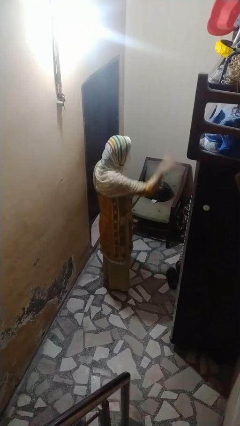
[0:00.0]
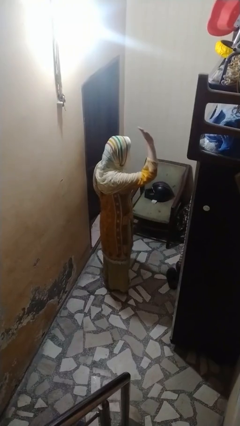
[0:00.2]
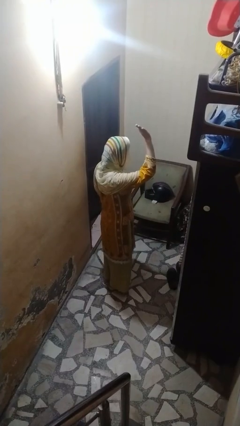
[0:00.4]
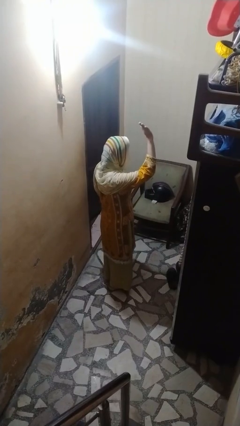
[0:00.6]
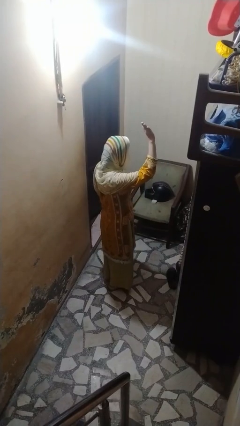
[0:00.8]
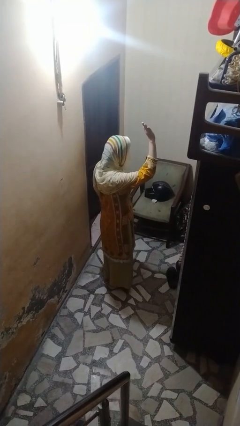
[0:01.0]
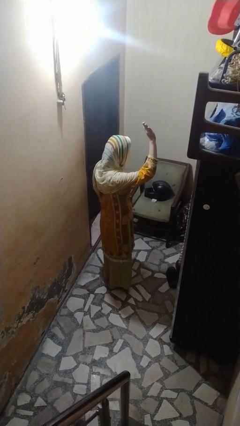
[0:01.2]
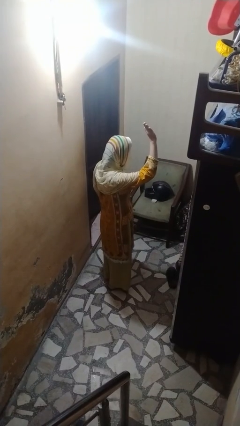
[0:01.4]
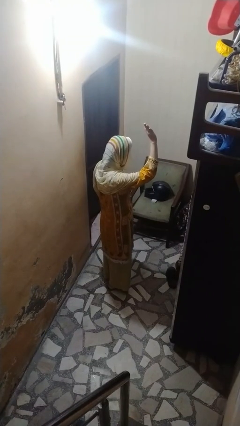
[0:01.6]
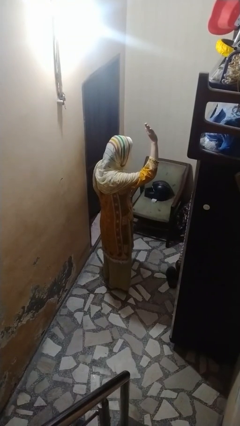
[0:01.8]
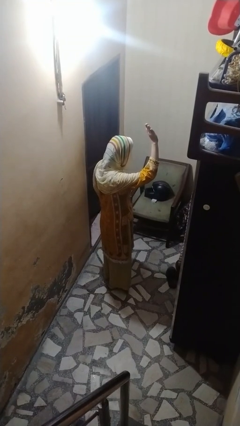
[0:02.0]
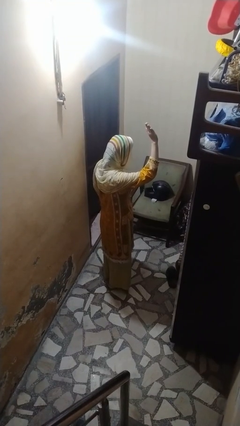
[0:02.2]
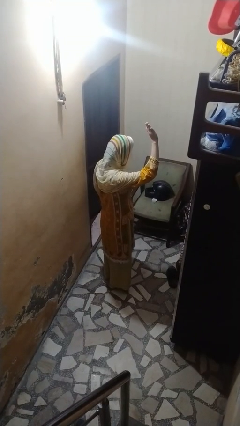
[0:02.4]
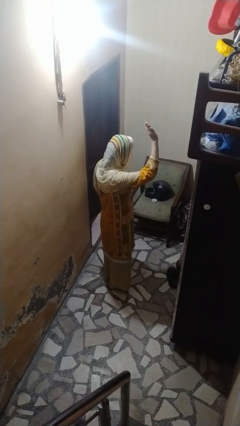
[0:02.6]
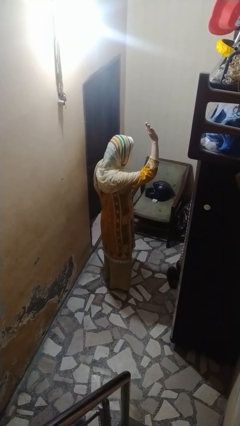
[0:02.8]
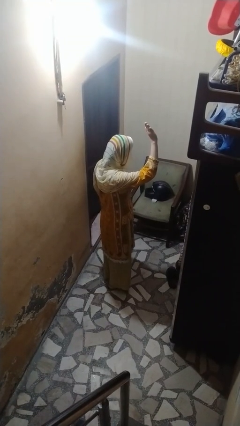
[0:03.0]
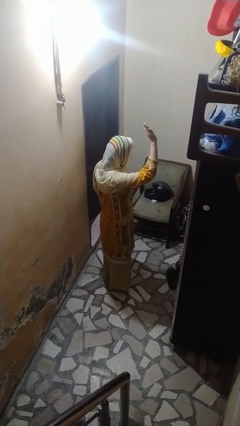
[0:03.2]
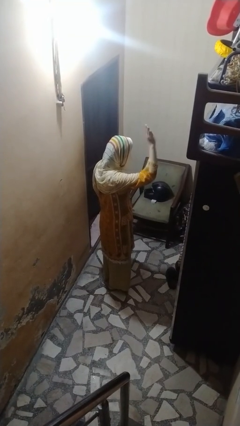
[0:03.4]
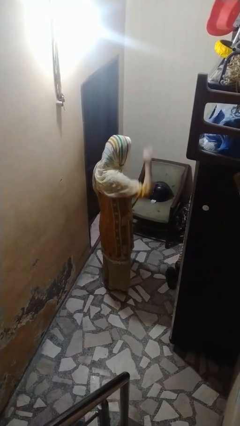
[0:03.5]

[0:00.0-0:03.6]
person gestures raise hand

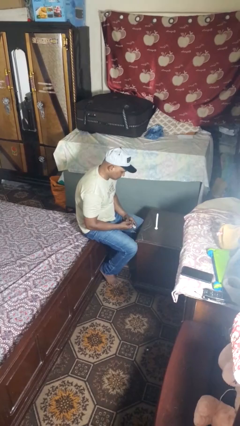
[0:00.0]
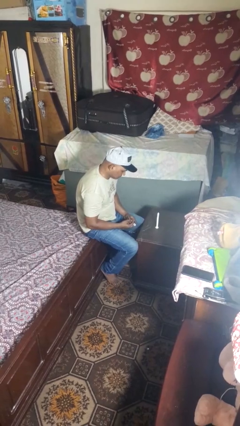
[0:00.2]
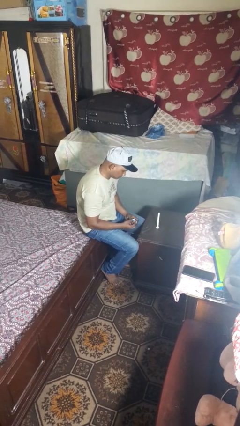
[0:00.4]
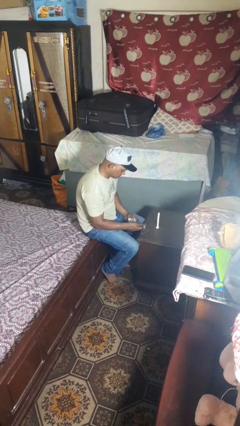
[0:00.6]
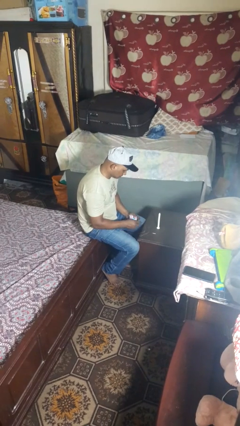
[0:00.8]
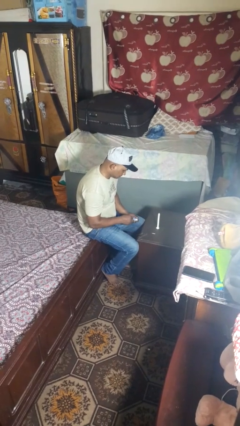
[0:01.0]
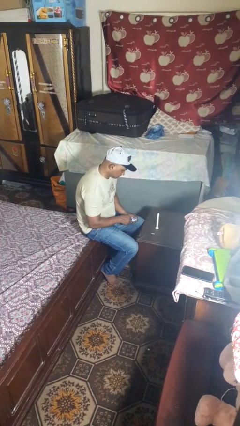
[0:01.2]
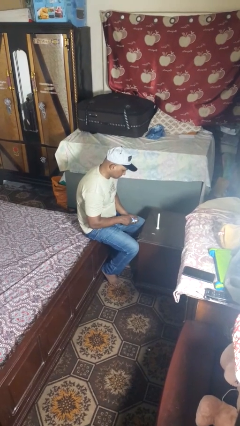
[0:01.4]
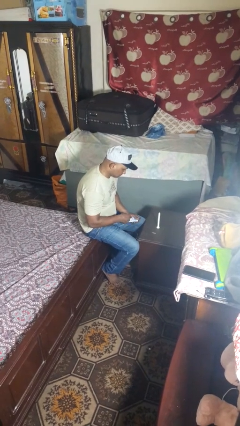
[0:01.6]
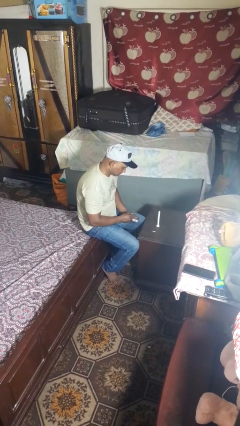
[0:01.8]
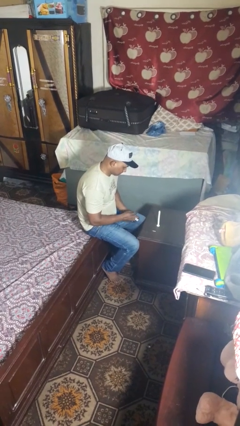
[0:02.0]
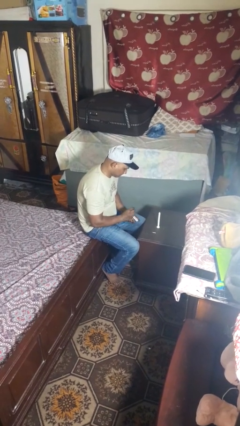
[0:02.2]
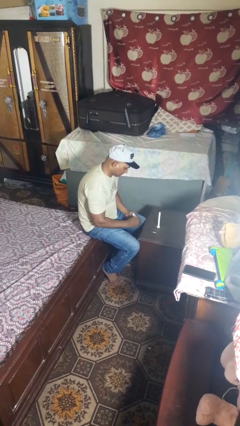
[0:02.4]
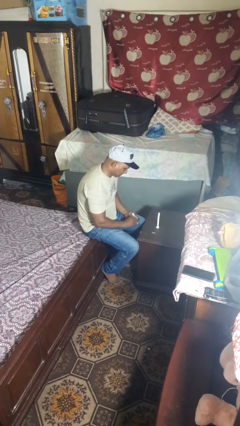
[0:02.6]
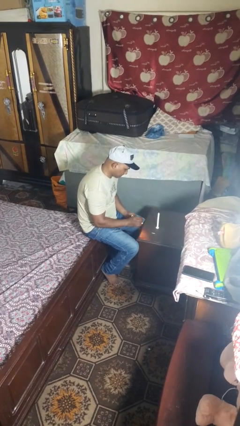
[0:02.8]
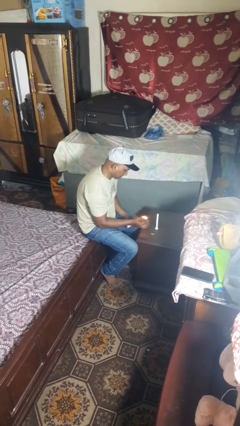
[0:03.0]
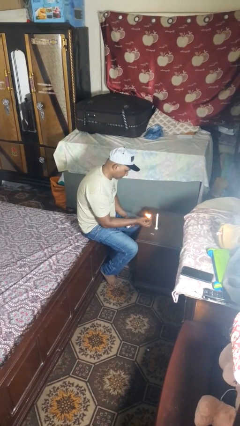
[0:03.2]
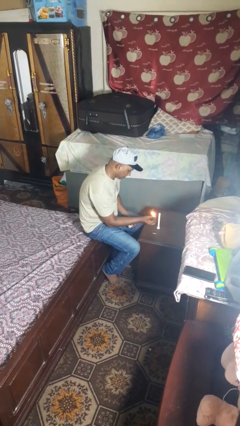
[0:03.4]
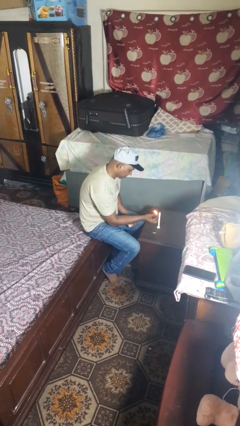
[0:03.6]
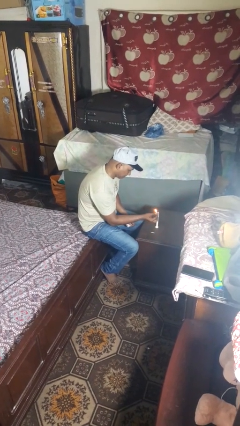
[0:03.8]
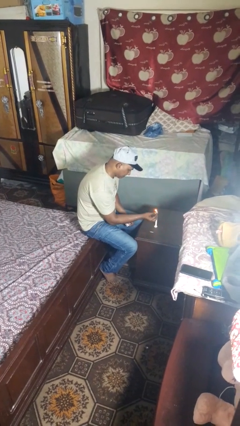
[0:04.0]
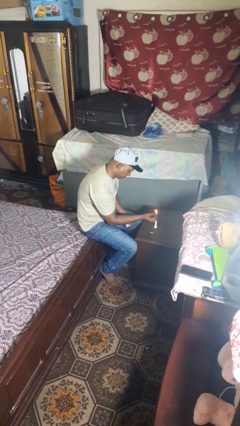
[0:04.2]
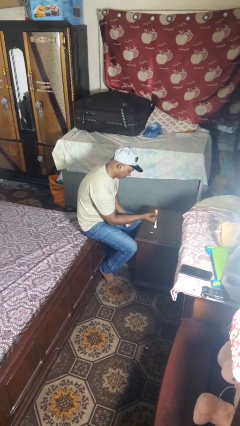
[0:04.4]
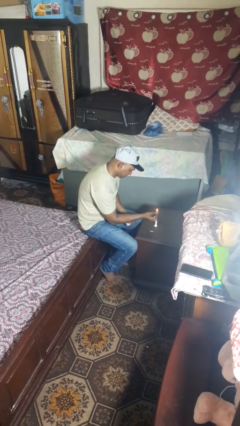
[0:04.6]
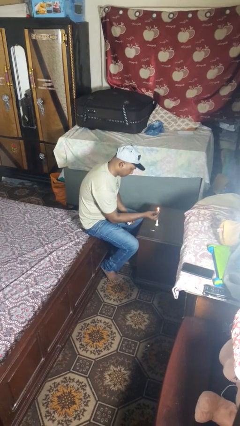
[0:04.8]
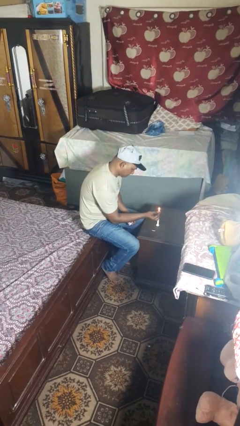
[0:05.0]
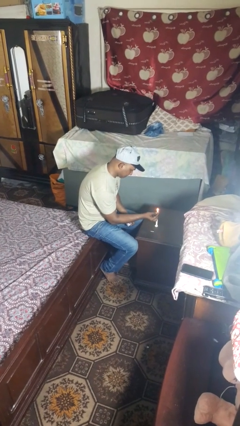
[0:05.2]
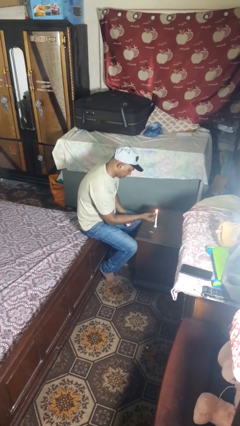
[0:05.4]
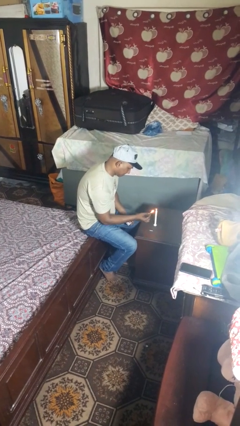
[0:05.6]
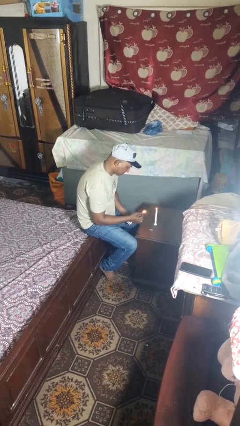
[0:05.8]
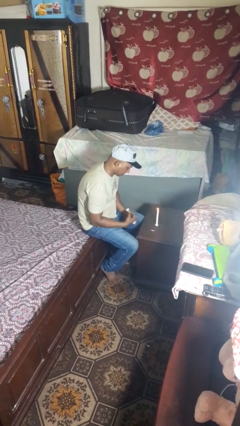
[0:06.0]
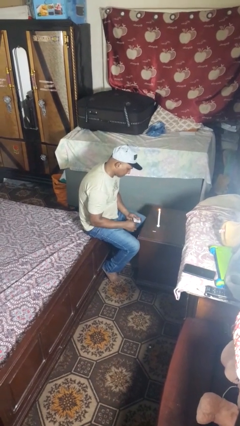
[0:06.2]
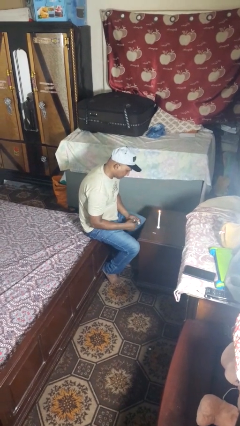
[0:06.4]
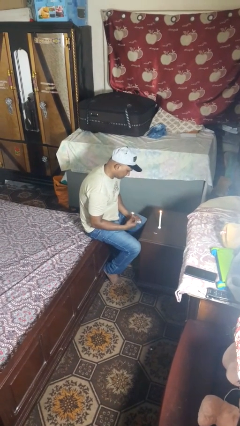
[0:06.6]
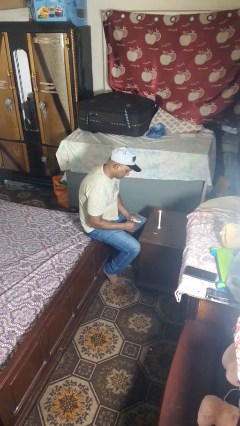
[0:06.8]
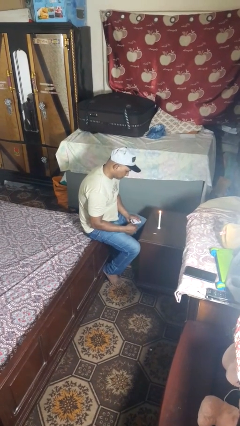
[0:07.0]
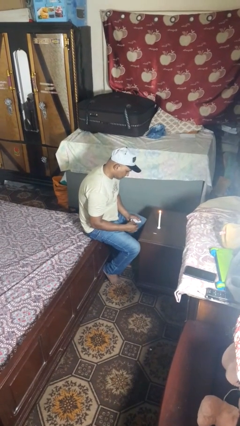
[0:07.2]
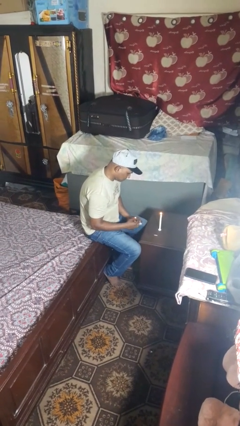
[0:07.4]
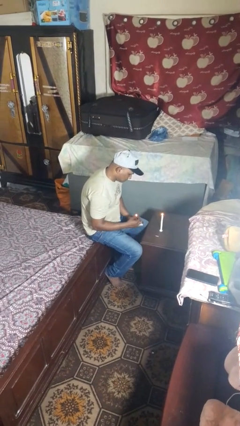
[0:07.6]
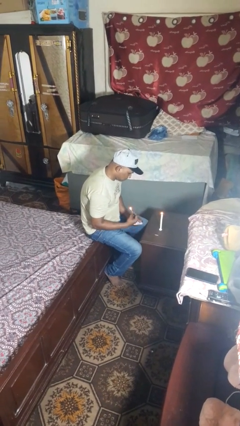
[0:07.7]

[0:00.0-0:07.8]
person lights candle

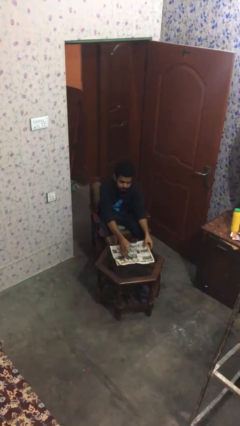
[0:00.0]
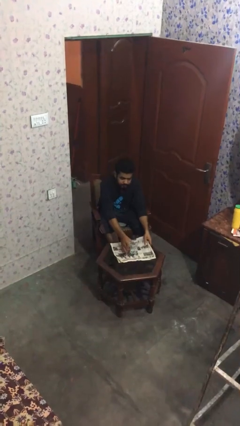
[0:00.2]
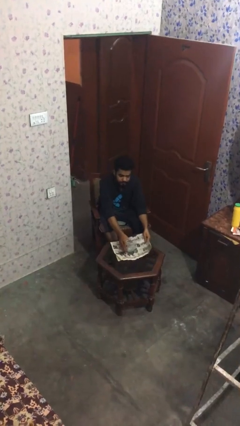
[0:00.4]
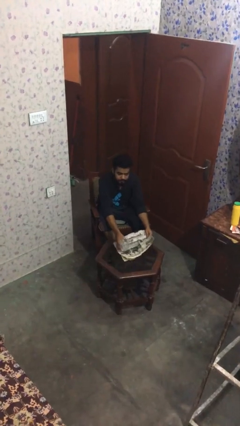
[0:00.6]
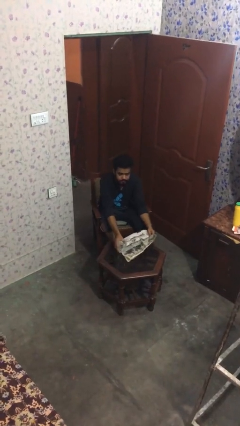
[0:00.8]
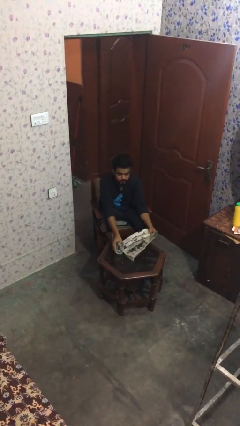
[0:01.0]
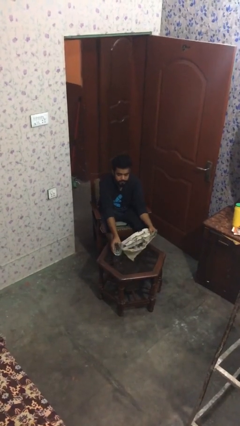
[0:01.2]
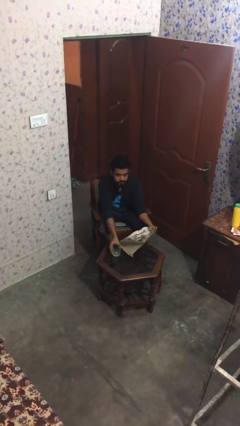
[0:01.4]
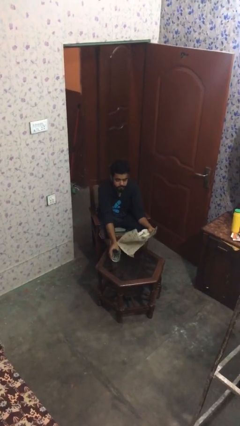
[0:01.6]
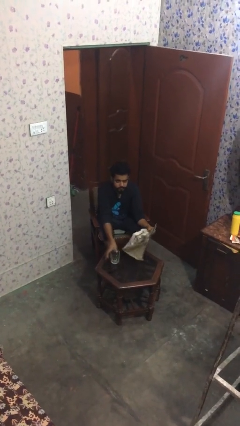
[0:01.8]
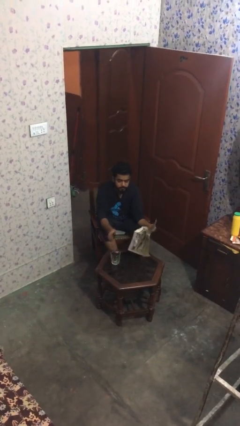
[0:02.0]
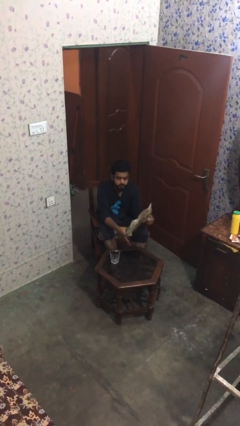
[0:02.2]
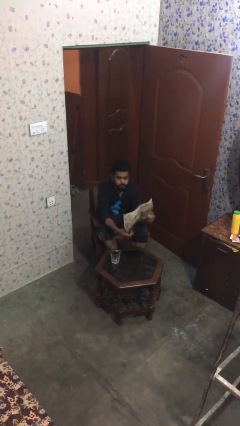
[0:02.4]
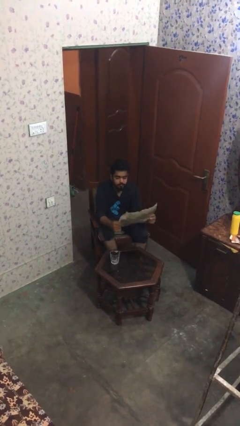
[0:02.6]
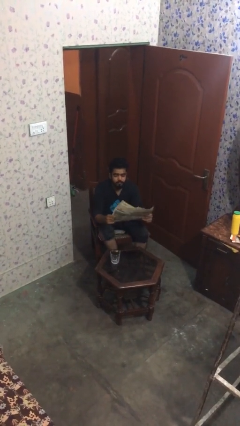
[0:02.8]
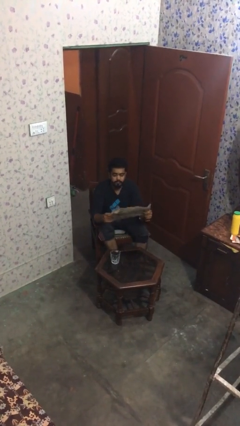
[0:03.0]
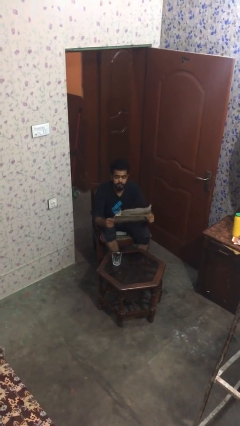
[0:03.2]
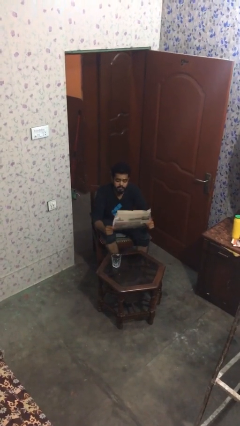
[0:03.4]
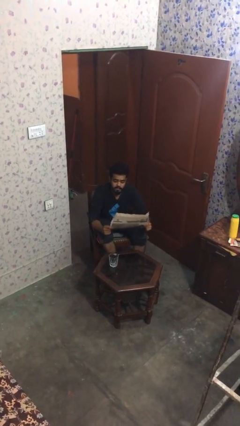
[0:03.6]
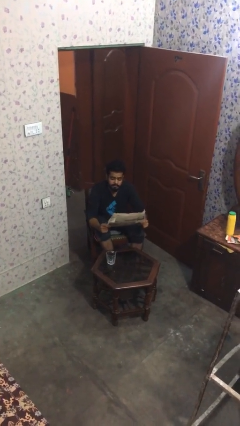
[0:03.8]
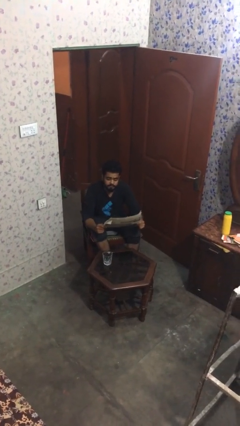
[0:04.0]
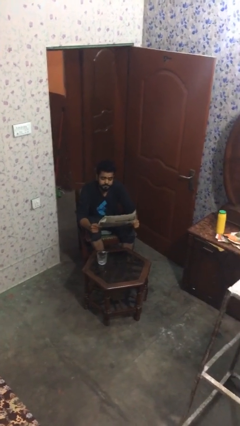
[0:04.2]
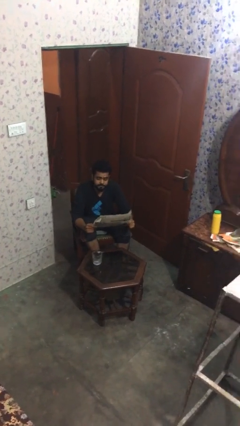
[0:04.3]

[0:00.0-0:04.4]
person picks up object from table

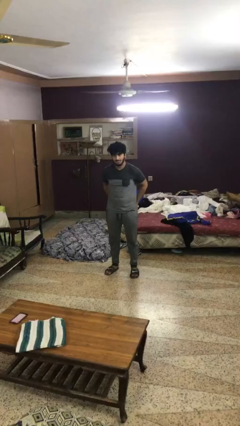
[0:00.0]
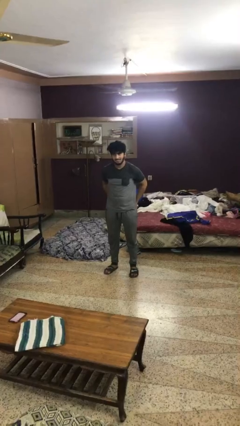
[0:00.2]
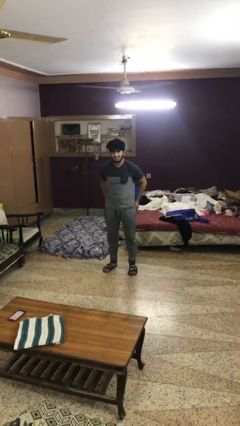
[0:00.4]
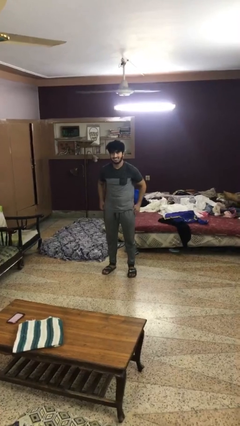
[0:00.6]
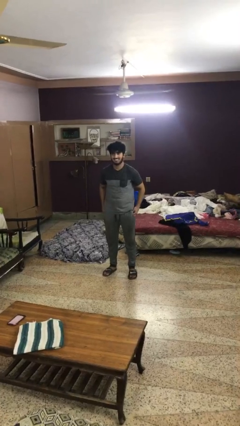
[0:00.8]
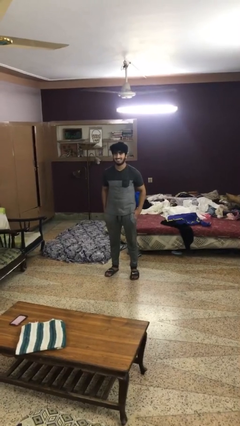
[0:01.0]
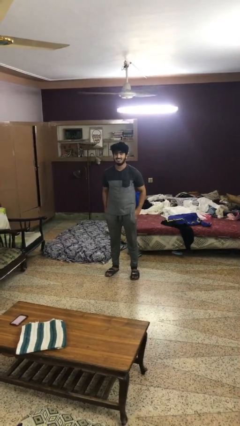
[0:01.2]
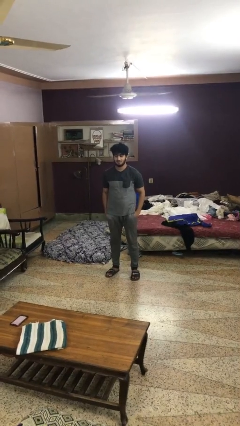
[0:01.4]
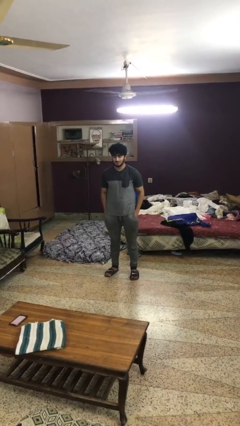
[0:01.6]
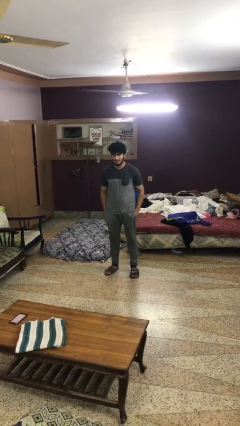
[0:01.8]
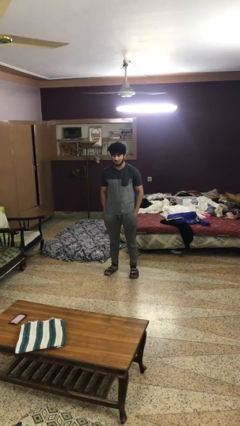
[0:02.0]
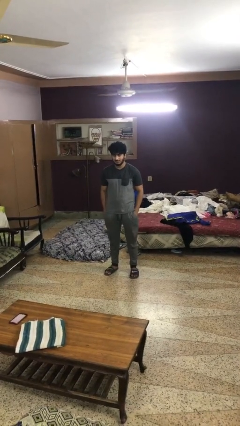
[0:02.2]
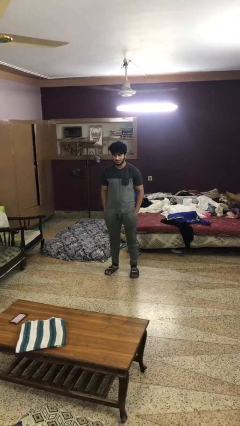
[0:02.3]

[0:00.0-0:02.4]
person puts hands in back pockets
